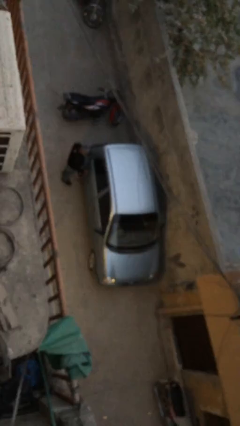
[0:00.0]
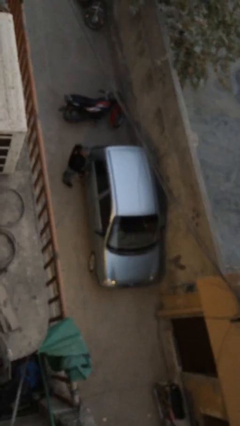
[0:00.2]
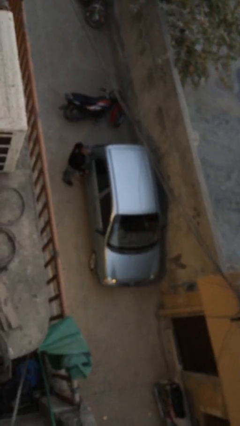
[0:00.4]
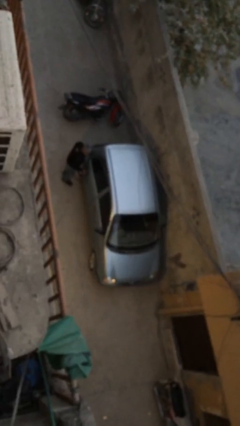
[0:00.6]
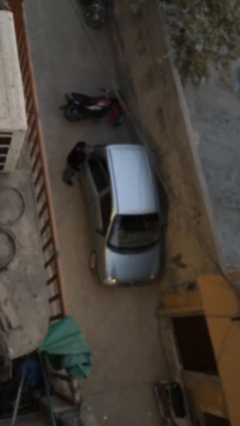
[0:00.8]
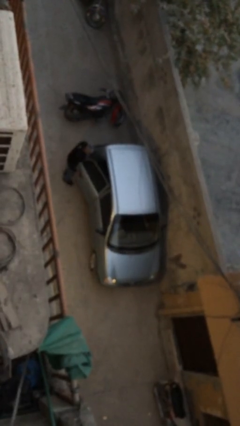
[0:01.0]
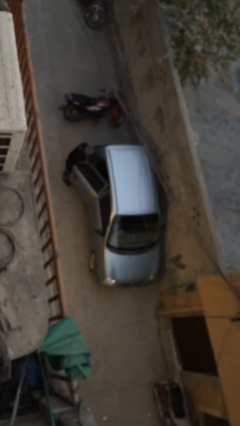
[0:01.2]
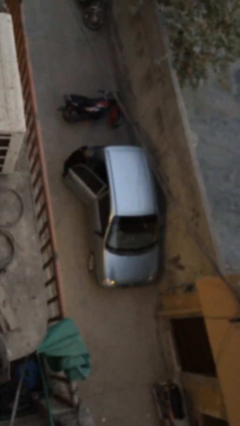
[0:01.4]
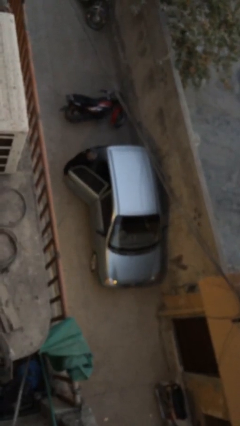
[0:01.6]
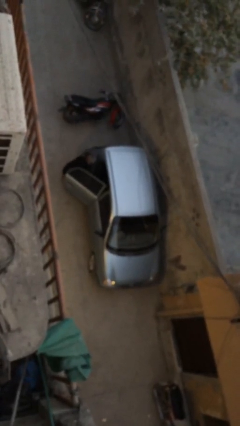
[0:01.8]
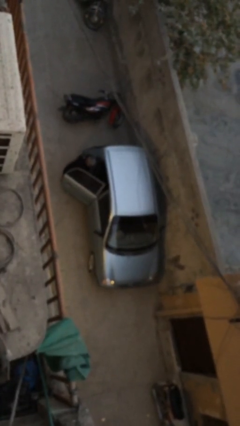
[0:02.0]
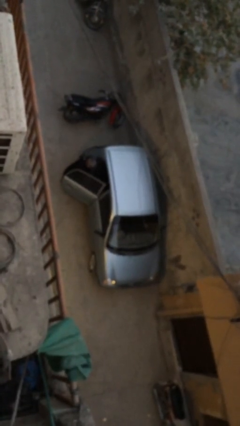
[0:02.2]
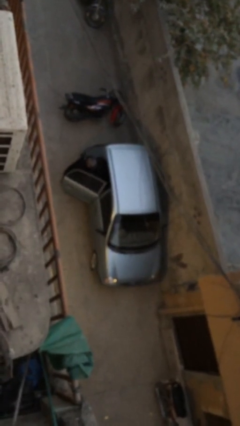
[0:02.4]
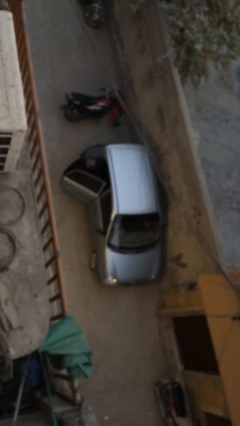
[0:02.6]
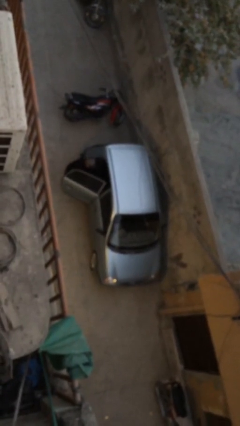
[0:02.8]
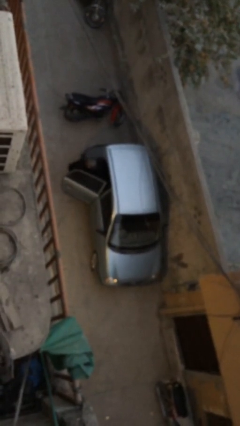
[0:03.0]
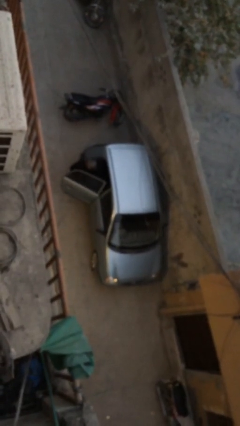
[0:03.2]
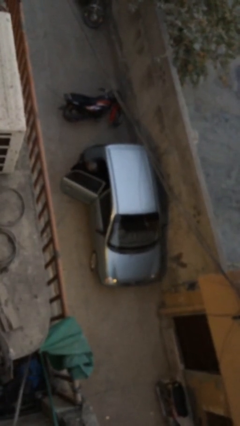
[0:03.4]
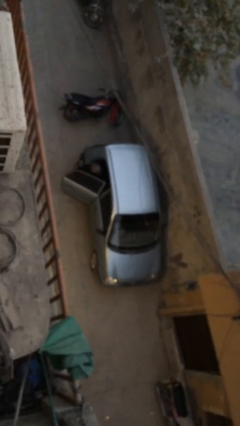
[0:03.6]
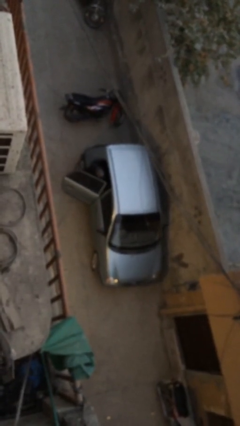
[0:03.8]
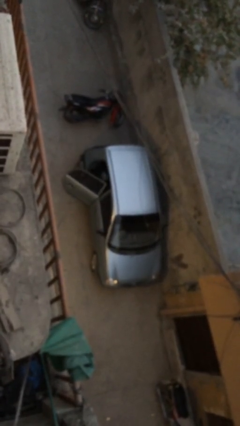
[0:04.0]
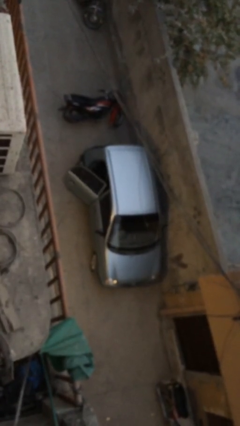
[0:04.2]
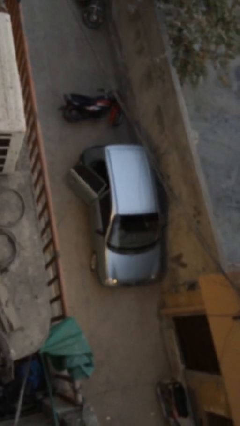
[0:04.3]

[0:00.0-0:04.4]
car picks up person

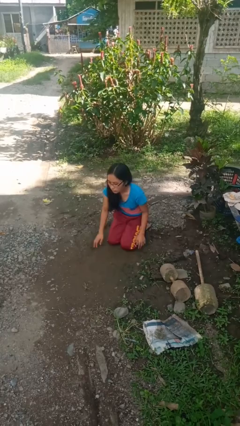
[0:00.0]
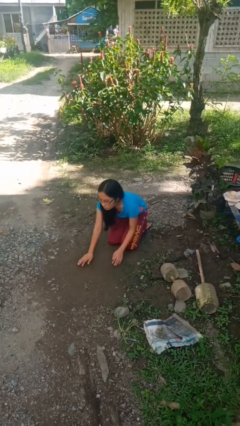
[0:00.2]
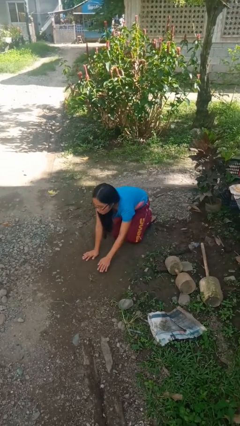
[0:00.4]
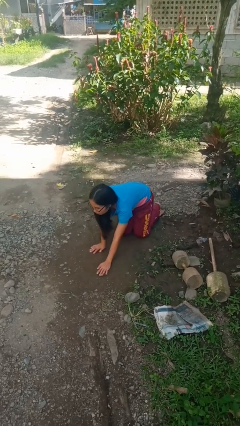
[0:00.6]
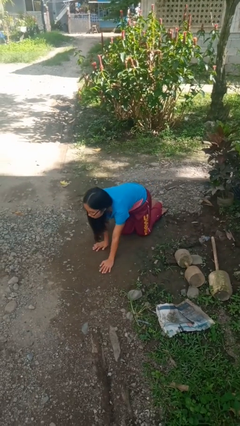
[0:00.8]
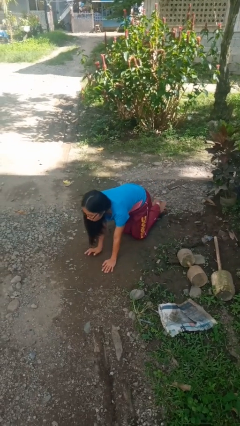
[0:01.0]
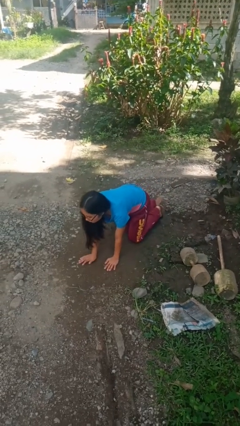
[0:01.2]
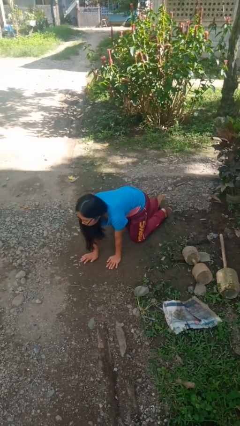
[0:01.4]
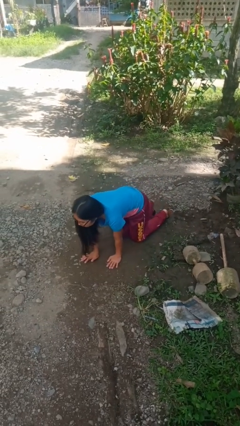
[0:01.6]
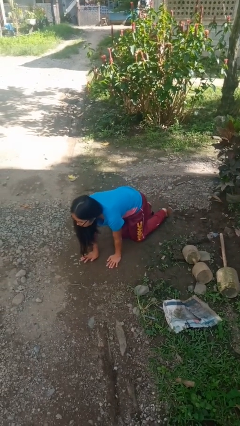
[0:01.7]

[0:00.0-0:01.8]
person crawls

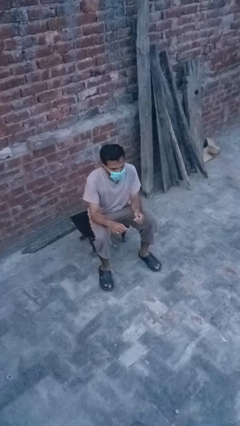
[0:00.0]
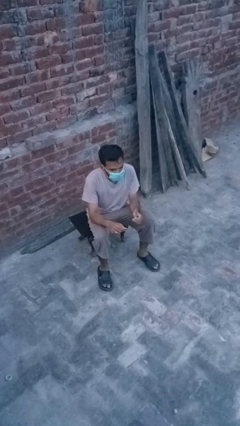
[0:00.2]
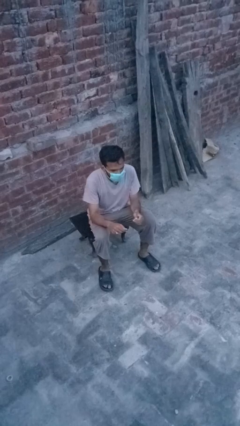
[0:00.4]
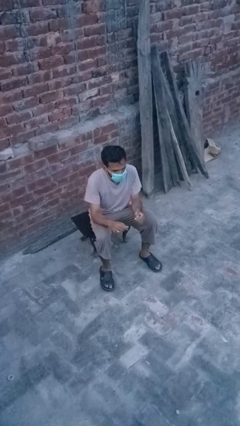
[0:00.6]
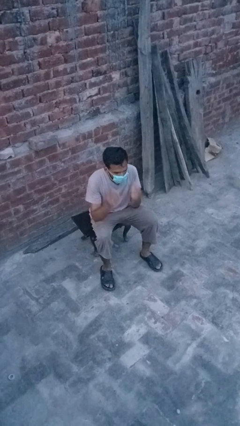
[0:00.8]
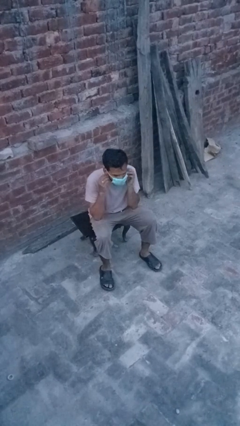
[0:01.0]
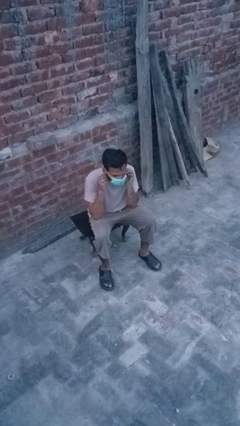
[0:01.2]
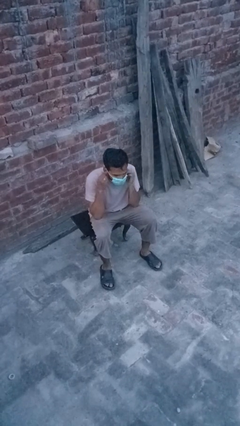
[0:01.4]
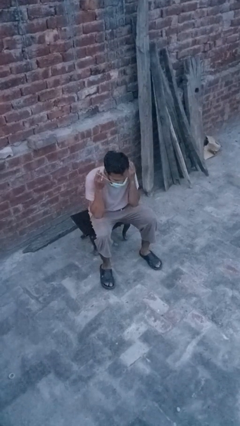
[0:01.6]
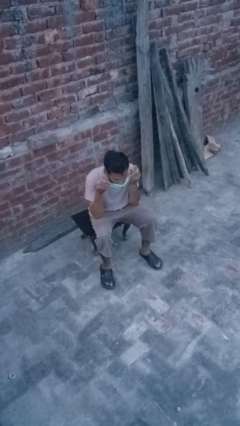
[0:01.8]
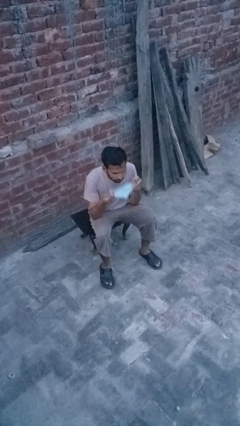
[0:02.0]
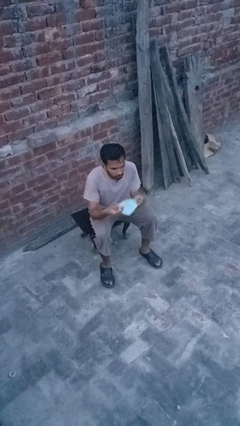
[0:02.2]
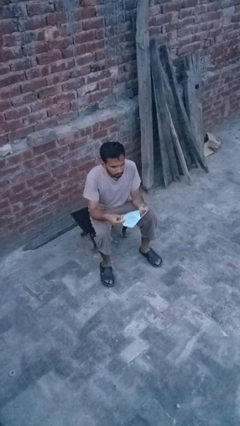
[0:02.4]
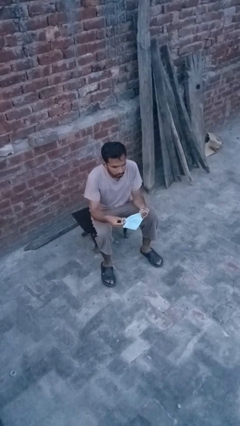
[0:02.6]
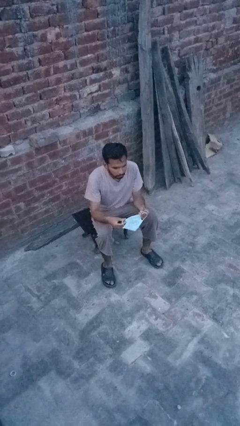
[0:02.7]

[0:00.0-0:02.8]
person takes off facemask

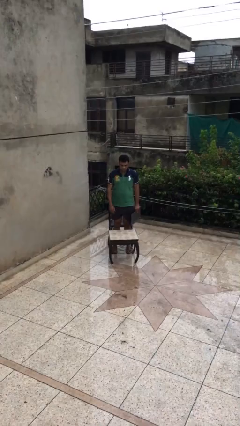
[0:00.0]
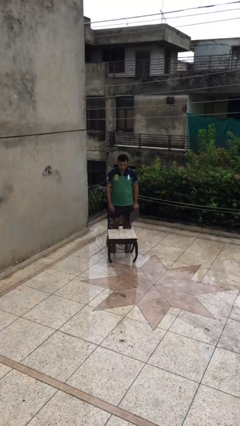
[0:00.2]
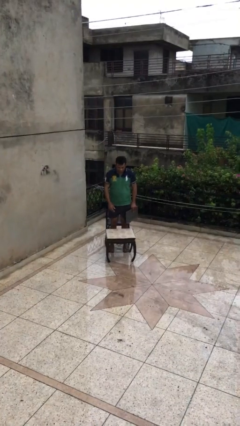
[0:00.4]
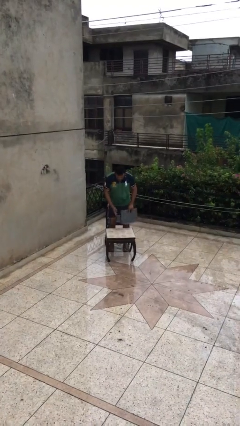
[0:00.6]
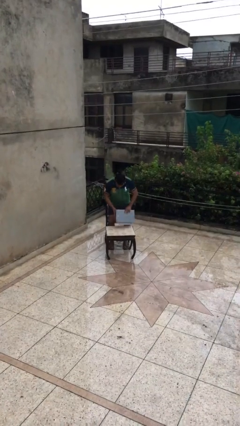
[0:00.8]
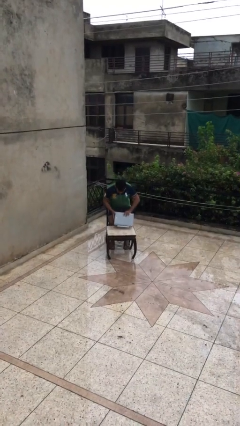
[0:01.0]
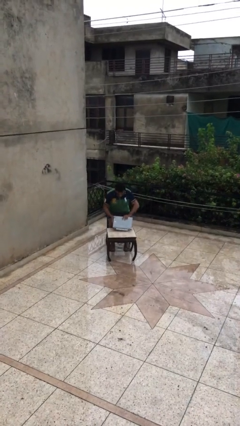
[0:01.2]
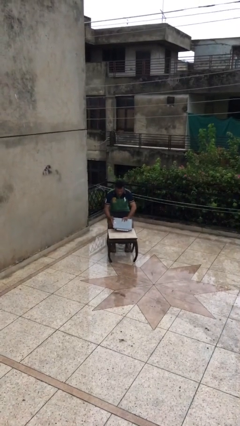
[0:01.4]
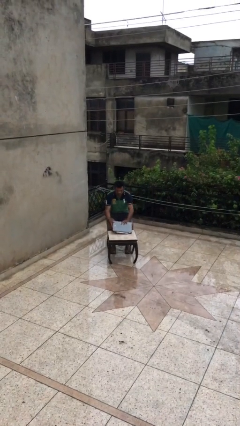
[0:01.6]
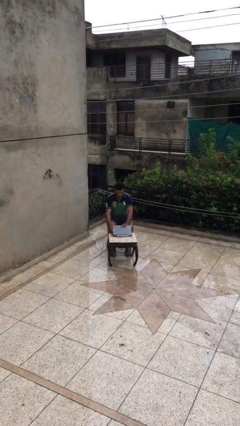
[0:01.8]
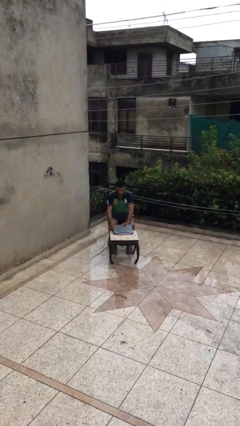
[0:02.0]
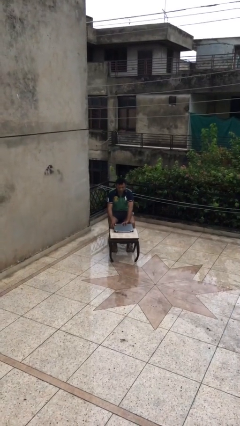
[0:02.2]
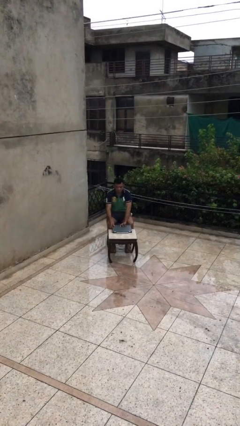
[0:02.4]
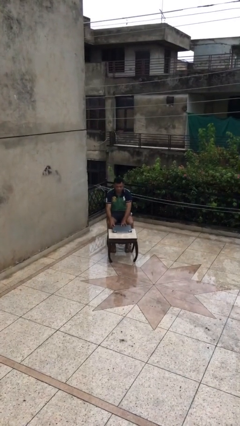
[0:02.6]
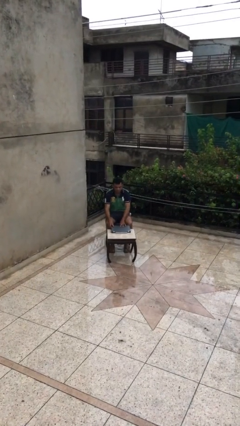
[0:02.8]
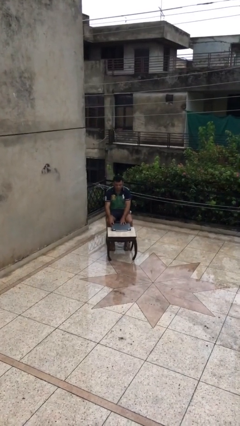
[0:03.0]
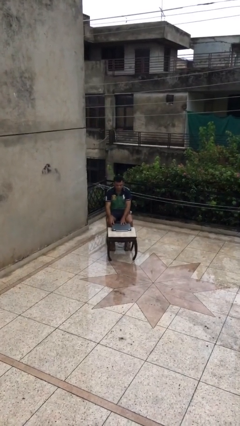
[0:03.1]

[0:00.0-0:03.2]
person sits down

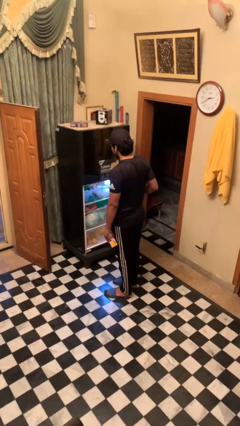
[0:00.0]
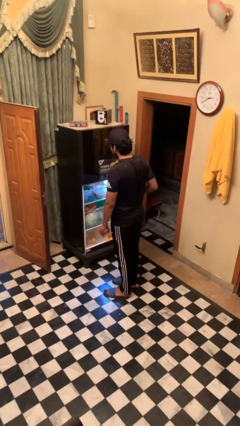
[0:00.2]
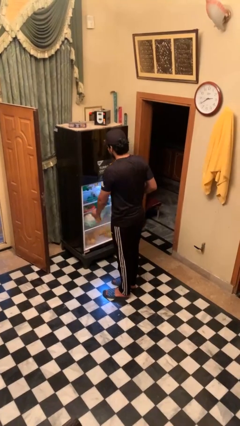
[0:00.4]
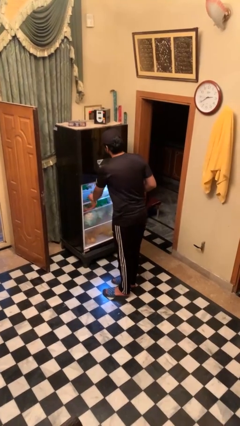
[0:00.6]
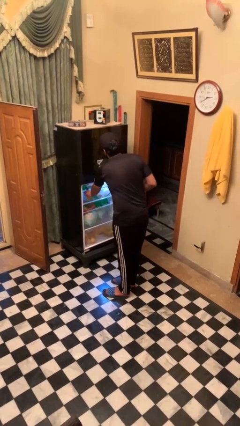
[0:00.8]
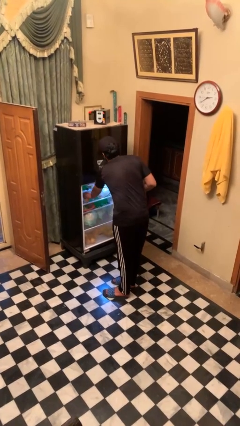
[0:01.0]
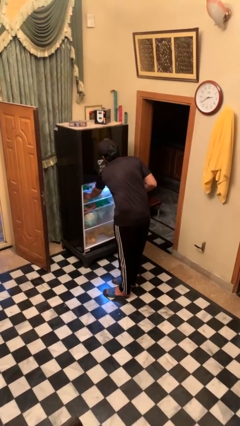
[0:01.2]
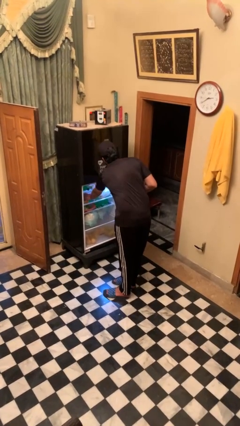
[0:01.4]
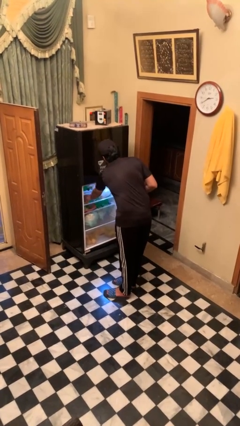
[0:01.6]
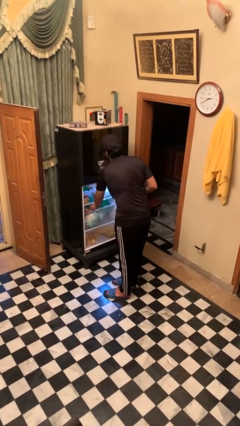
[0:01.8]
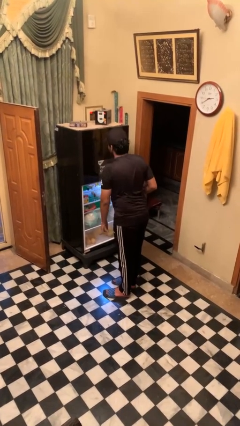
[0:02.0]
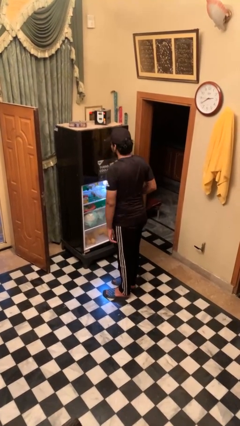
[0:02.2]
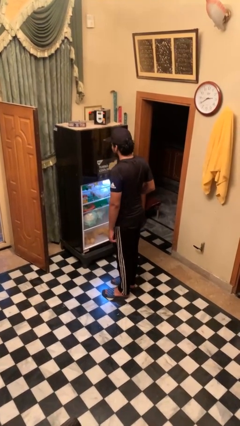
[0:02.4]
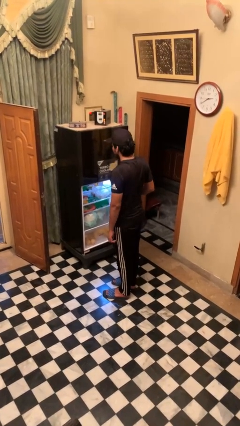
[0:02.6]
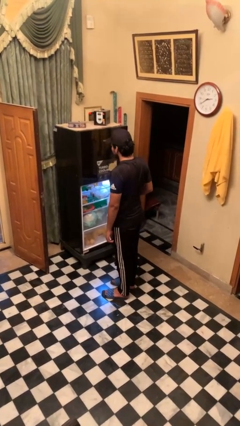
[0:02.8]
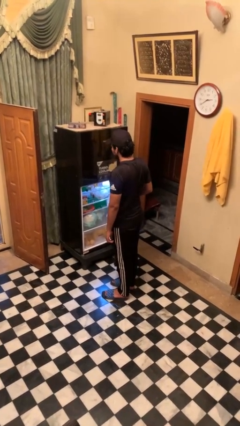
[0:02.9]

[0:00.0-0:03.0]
person puts object into refrigerator

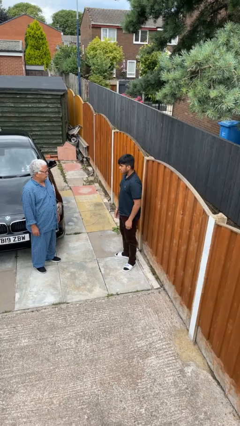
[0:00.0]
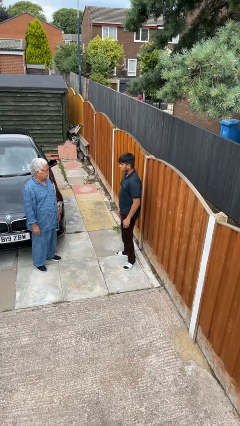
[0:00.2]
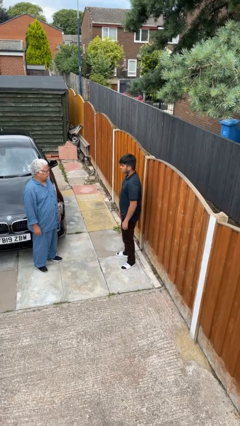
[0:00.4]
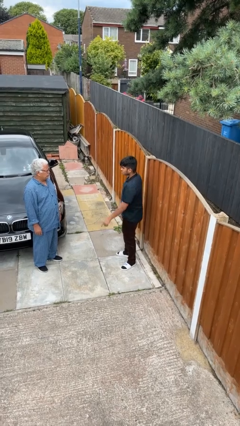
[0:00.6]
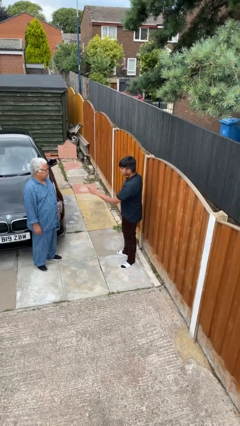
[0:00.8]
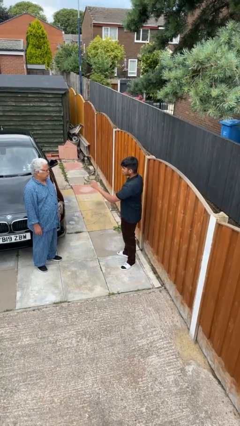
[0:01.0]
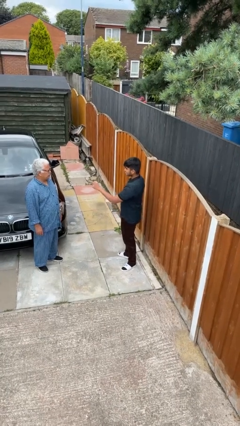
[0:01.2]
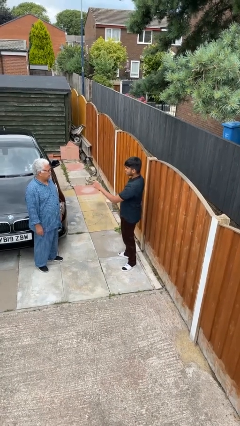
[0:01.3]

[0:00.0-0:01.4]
person points at person

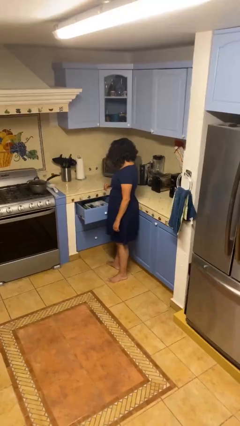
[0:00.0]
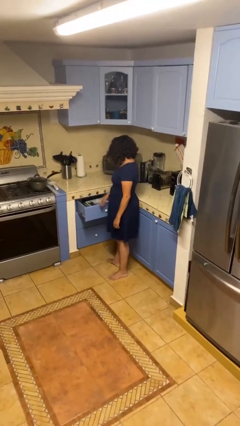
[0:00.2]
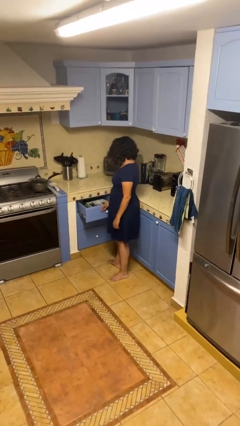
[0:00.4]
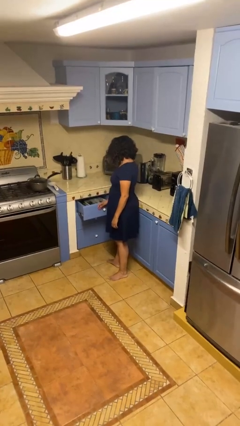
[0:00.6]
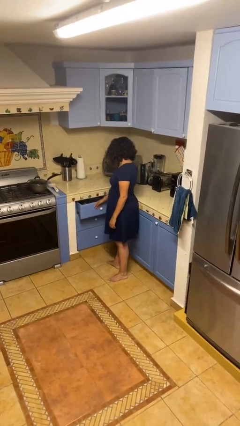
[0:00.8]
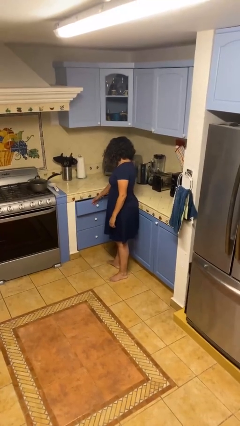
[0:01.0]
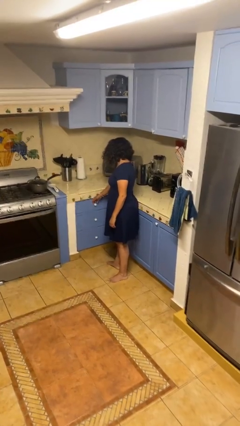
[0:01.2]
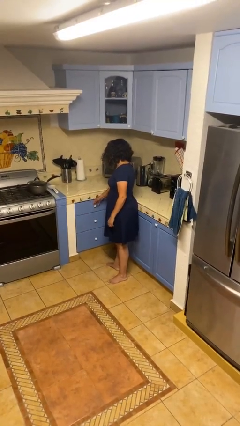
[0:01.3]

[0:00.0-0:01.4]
person closes kitchen drawer
